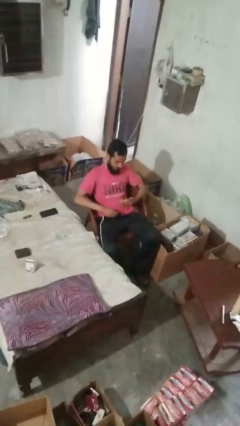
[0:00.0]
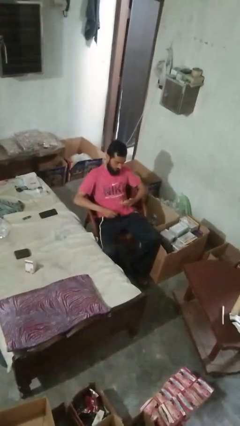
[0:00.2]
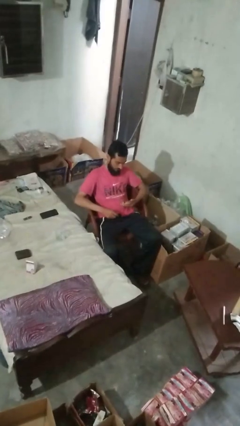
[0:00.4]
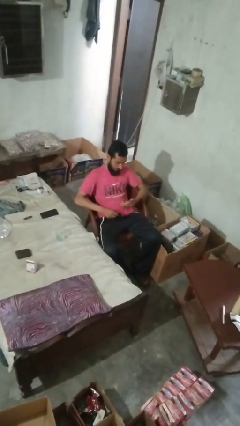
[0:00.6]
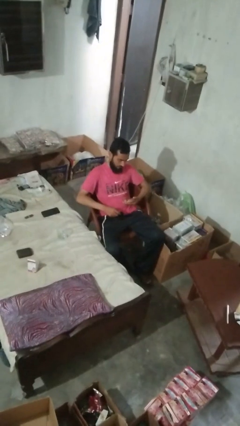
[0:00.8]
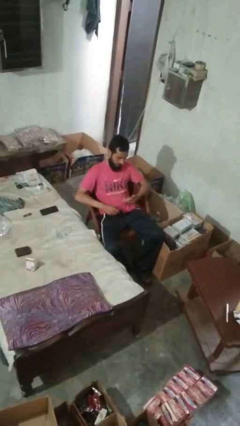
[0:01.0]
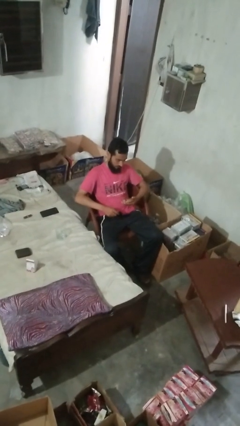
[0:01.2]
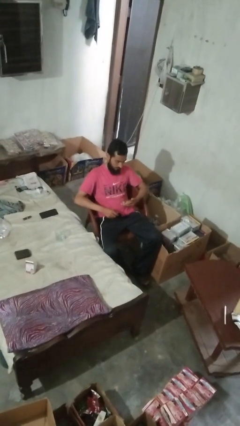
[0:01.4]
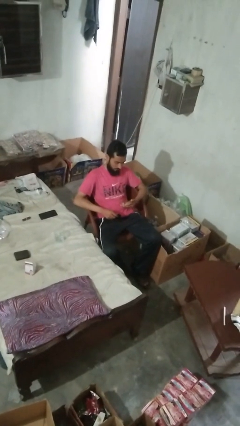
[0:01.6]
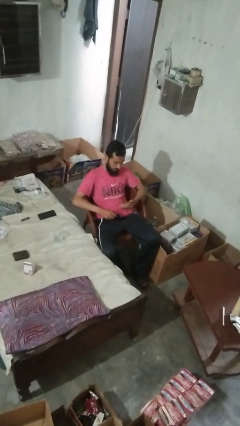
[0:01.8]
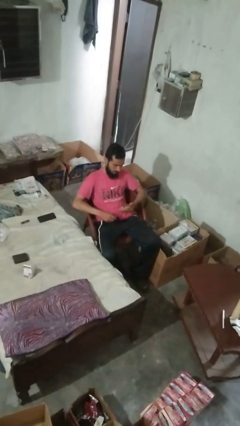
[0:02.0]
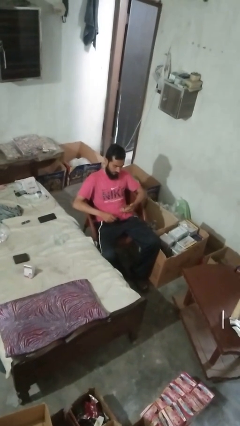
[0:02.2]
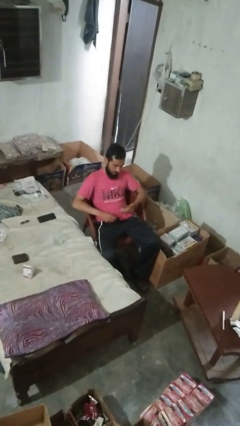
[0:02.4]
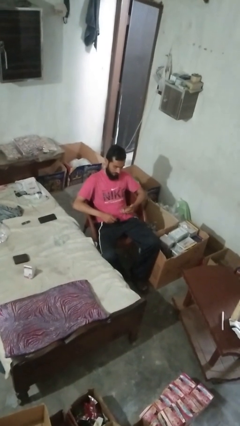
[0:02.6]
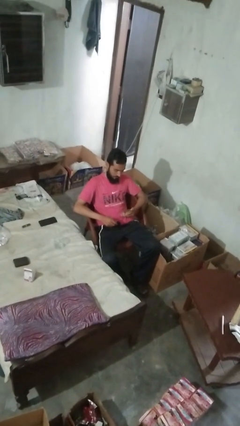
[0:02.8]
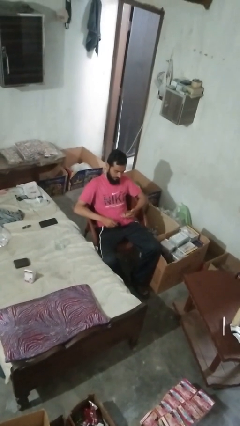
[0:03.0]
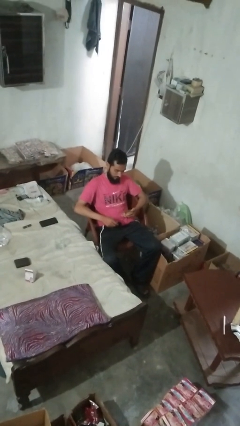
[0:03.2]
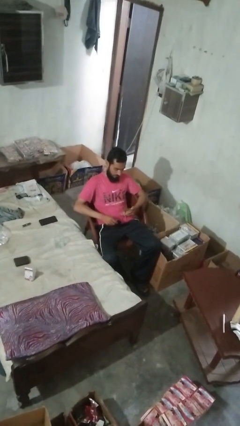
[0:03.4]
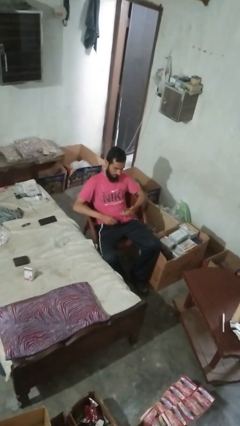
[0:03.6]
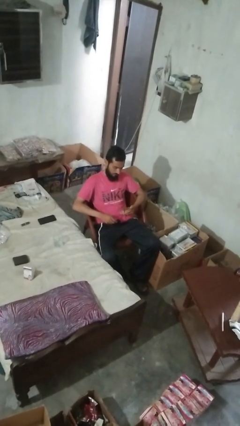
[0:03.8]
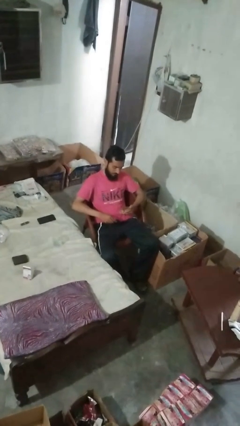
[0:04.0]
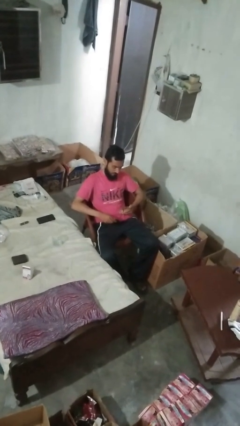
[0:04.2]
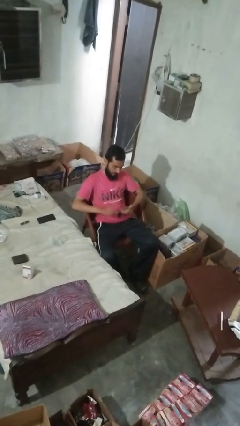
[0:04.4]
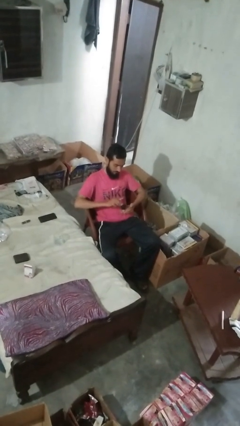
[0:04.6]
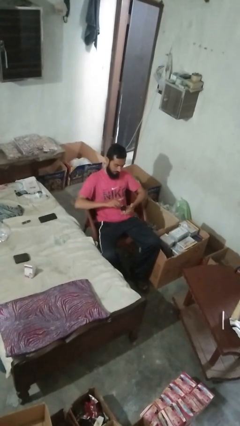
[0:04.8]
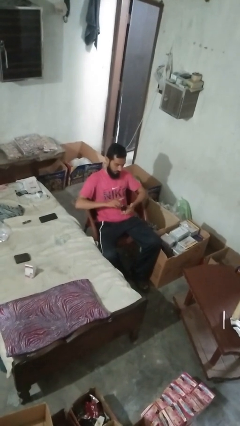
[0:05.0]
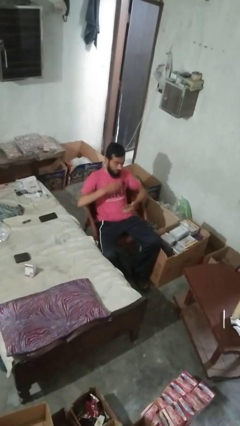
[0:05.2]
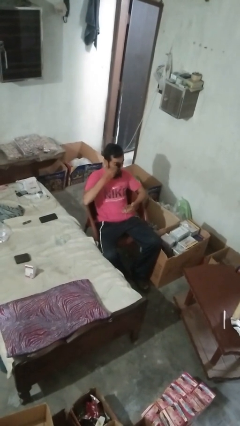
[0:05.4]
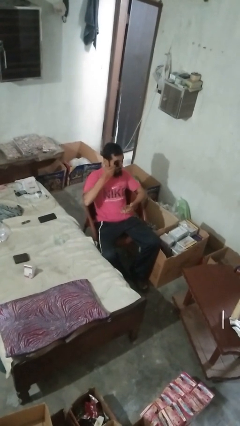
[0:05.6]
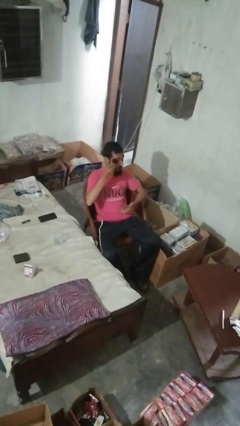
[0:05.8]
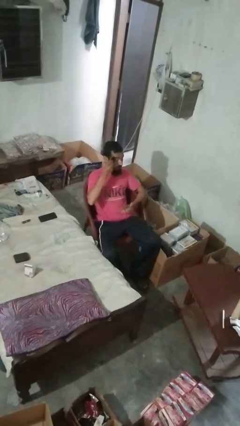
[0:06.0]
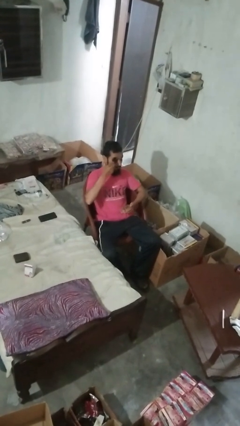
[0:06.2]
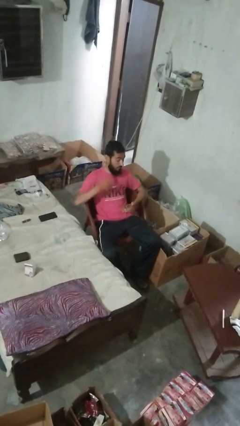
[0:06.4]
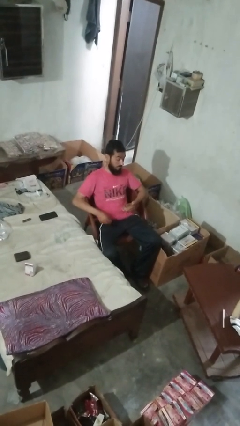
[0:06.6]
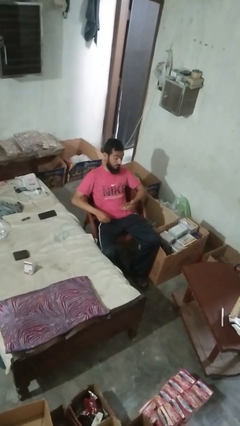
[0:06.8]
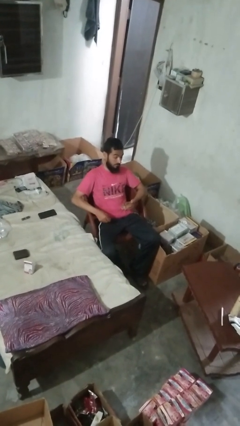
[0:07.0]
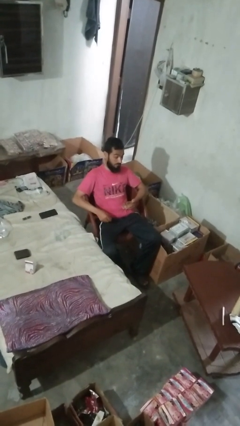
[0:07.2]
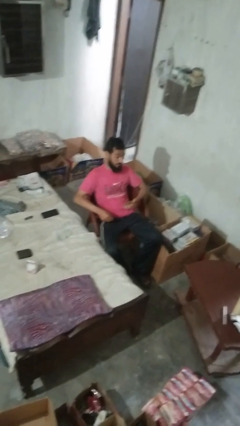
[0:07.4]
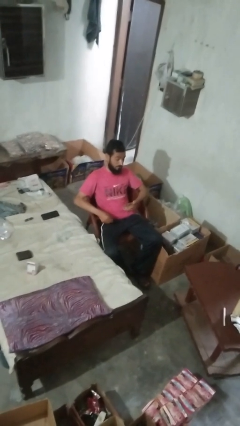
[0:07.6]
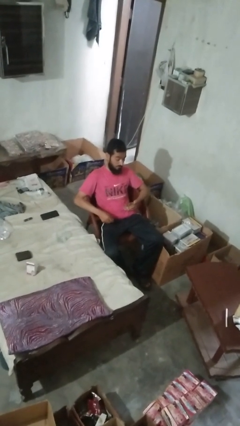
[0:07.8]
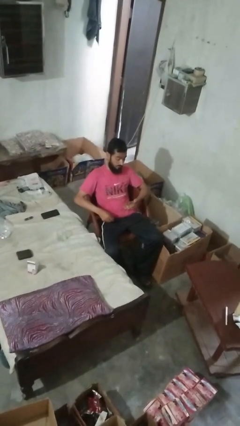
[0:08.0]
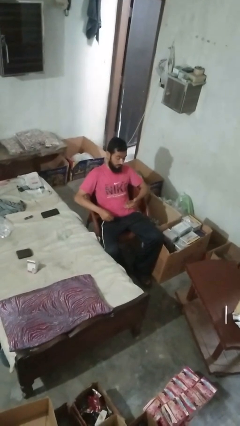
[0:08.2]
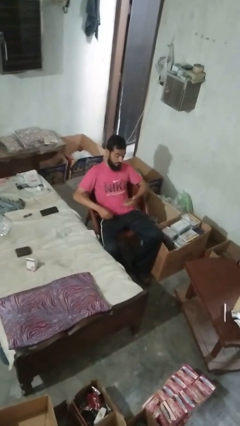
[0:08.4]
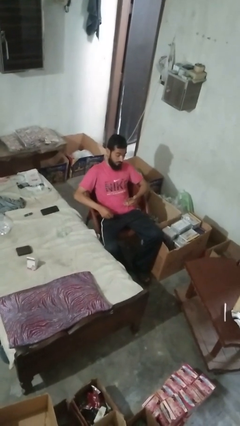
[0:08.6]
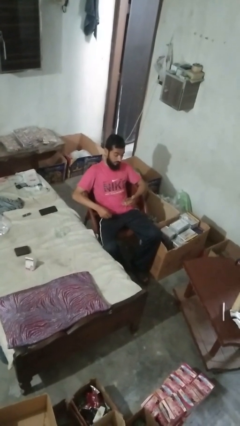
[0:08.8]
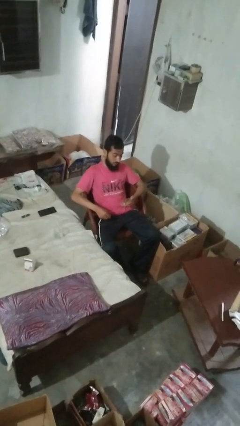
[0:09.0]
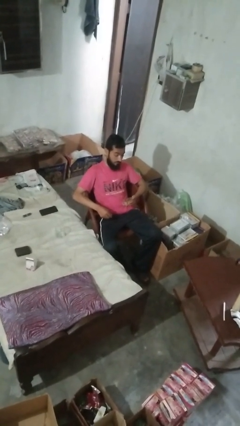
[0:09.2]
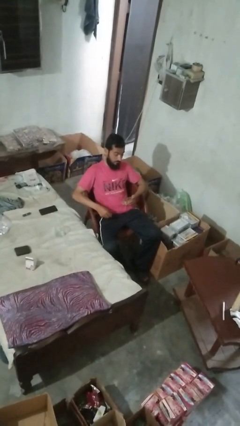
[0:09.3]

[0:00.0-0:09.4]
person applies eye makeup

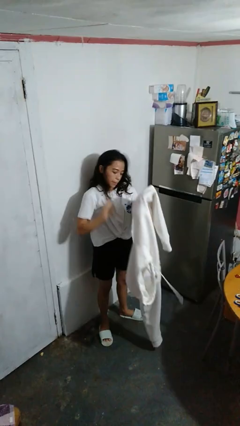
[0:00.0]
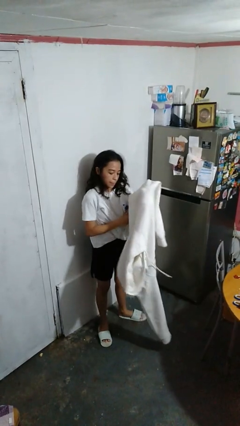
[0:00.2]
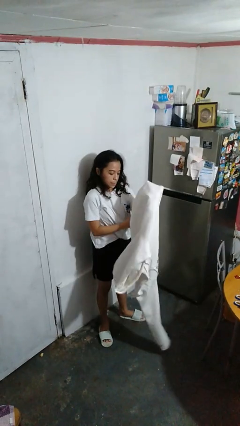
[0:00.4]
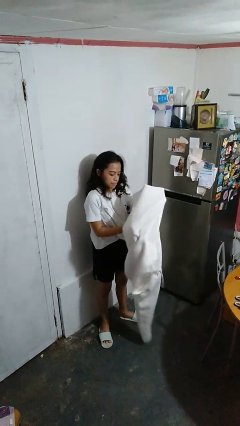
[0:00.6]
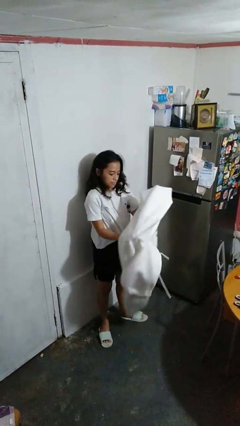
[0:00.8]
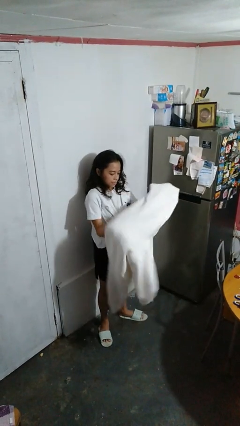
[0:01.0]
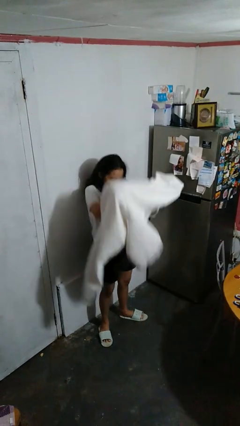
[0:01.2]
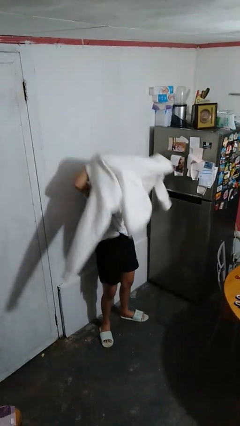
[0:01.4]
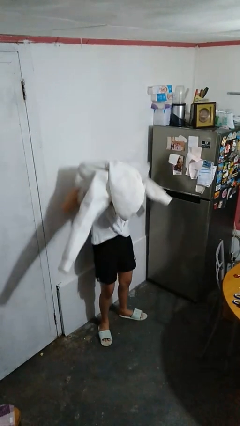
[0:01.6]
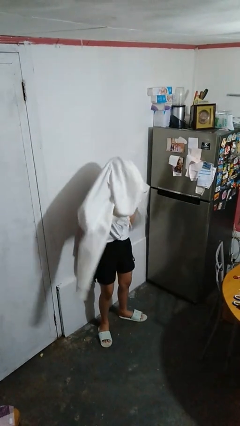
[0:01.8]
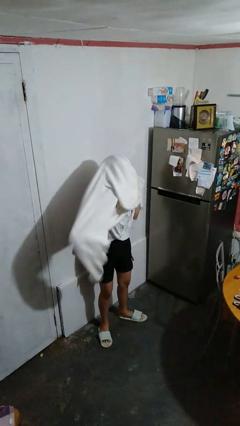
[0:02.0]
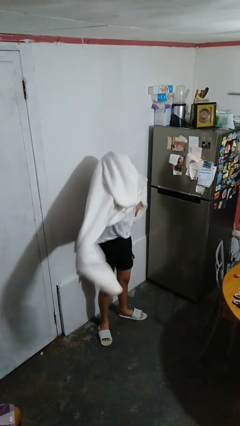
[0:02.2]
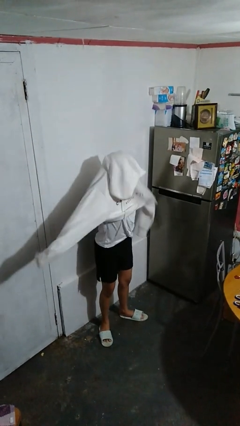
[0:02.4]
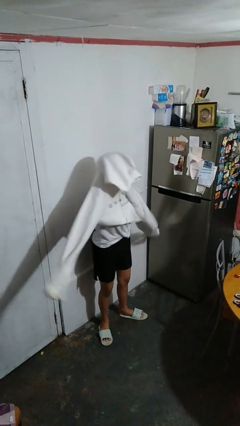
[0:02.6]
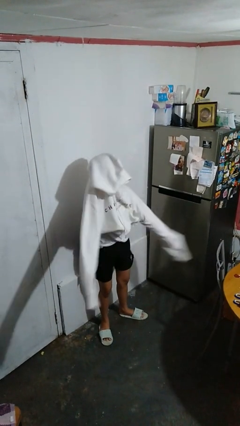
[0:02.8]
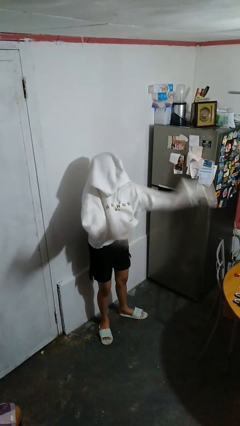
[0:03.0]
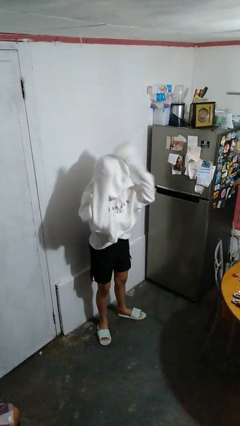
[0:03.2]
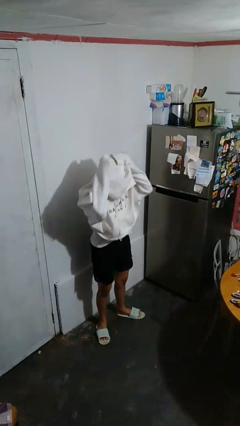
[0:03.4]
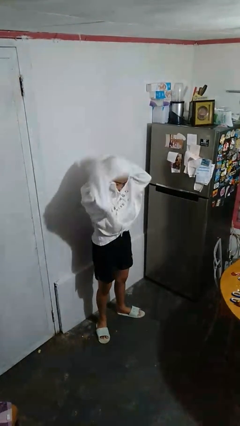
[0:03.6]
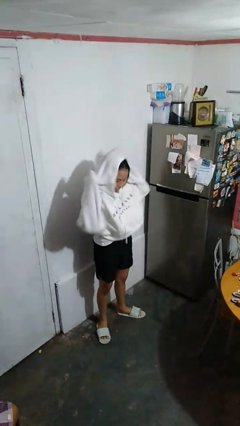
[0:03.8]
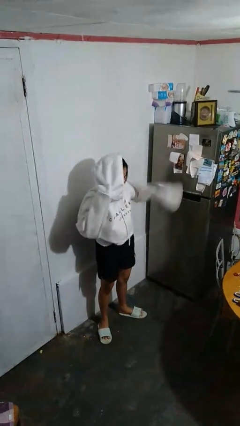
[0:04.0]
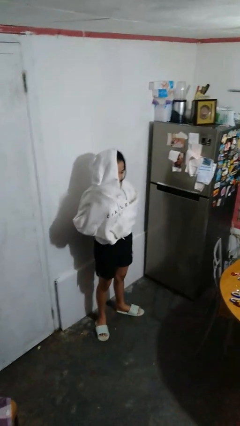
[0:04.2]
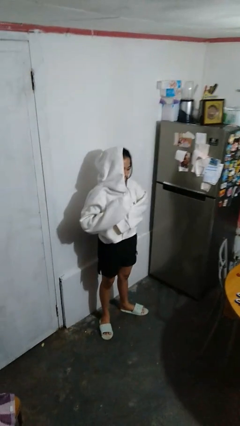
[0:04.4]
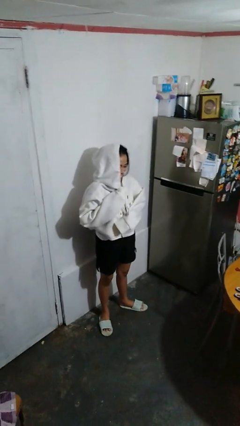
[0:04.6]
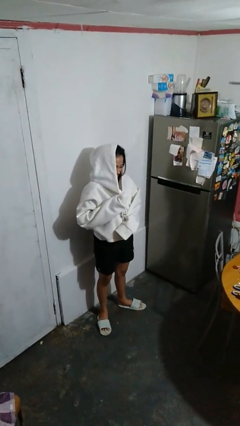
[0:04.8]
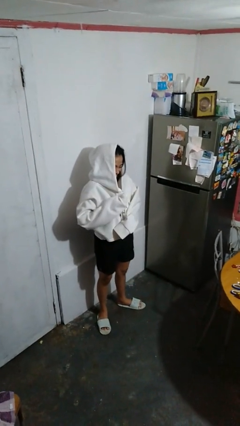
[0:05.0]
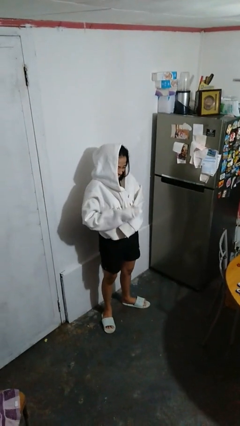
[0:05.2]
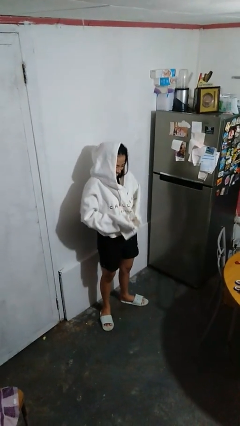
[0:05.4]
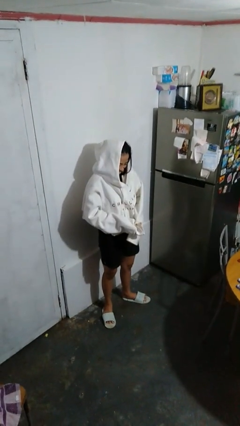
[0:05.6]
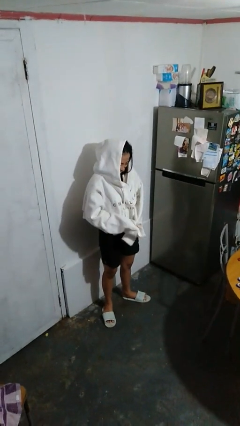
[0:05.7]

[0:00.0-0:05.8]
person puts on hoodie

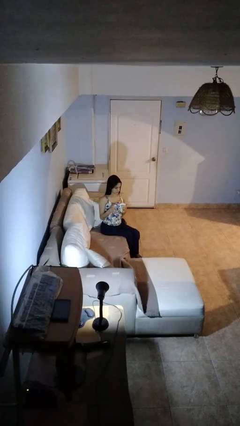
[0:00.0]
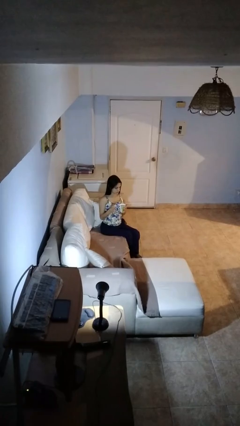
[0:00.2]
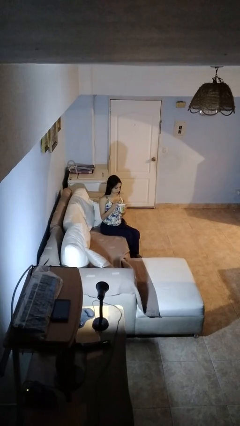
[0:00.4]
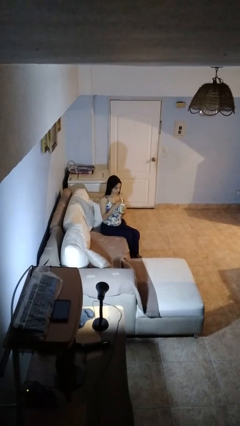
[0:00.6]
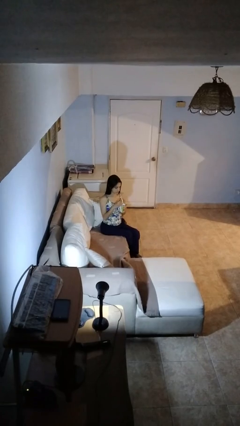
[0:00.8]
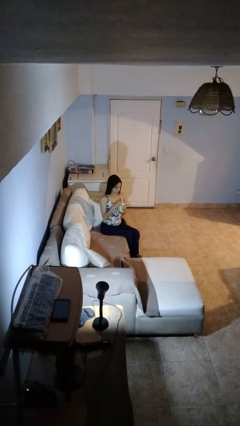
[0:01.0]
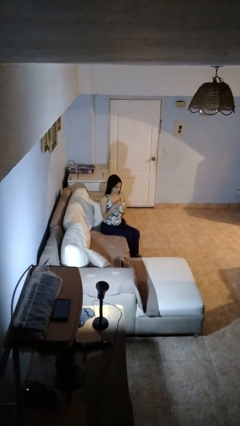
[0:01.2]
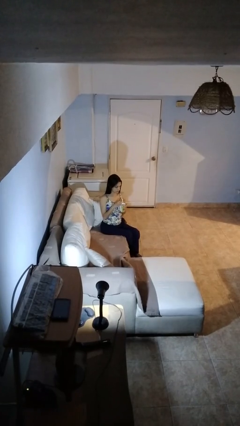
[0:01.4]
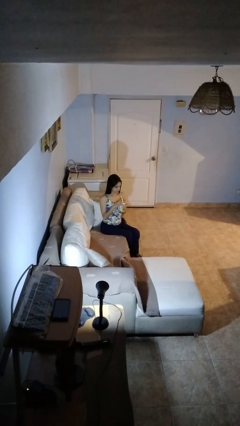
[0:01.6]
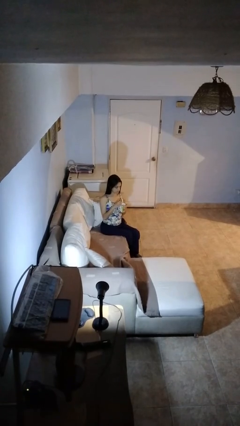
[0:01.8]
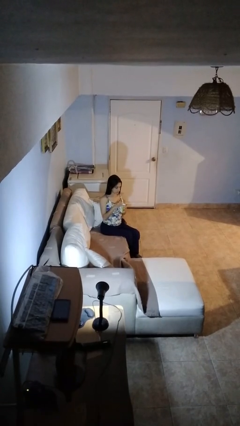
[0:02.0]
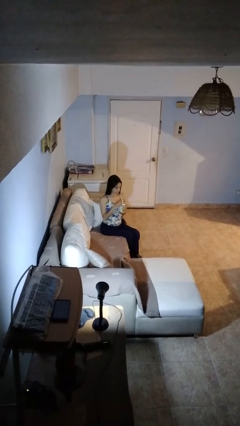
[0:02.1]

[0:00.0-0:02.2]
person stirs mug

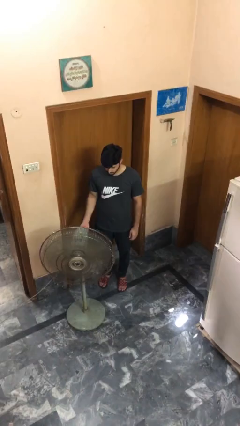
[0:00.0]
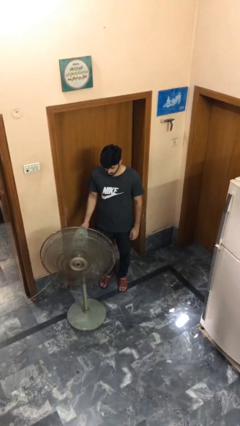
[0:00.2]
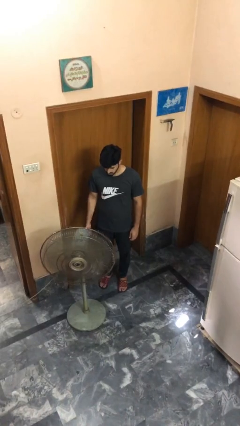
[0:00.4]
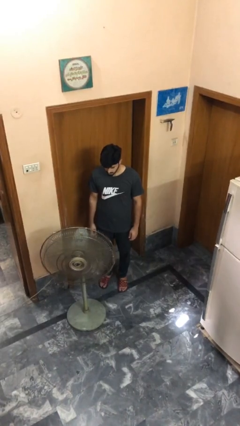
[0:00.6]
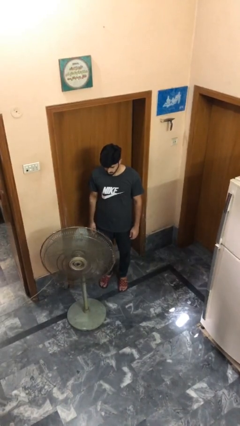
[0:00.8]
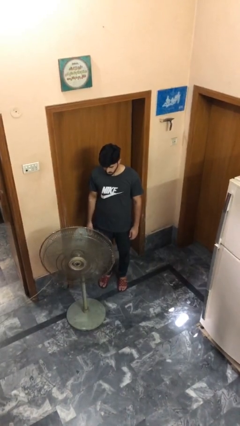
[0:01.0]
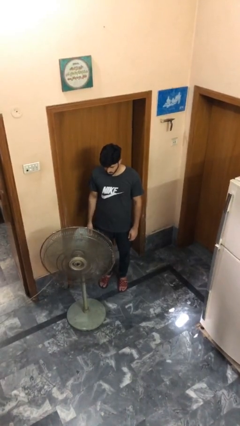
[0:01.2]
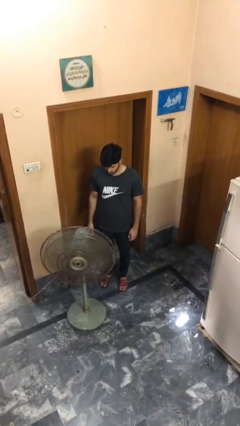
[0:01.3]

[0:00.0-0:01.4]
person turns off fan
